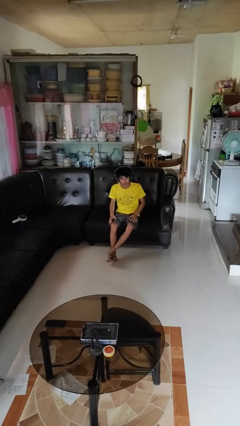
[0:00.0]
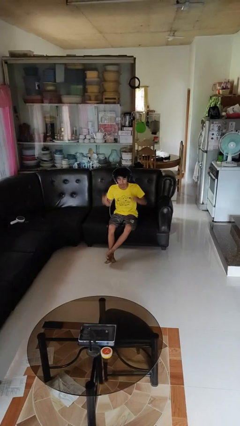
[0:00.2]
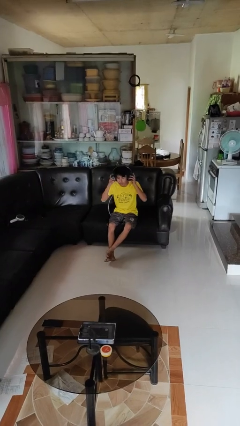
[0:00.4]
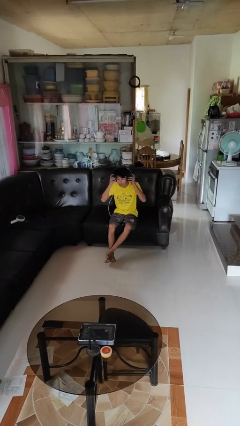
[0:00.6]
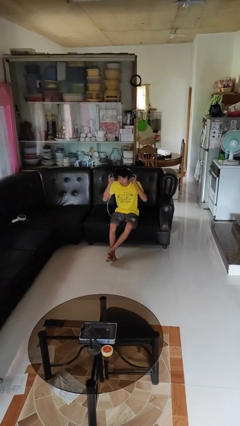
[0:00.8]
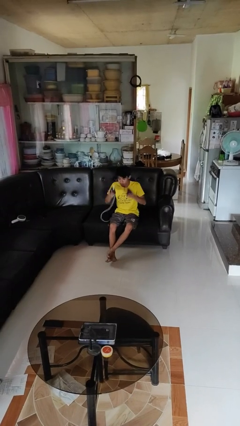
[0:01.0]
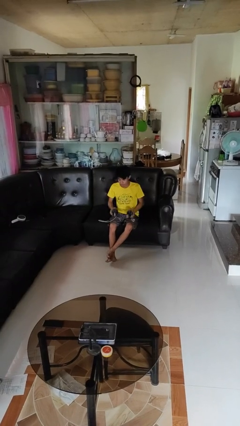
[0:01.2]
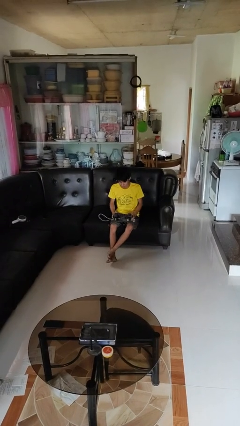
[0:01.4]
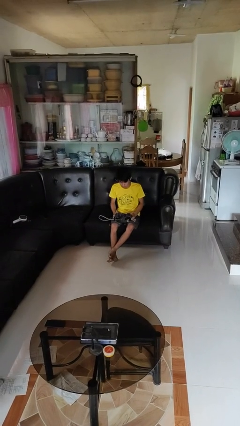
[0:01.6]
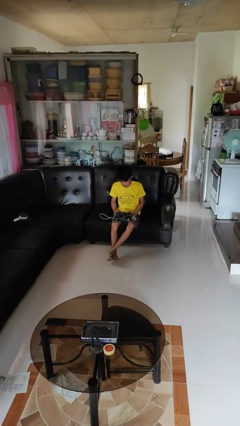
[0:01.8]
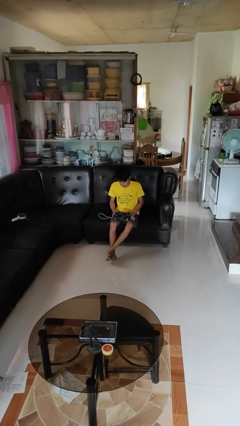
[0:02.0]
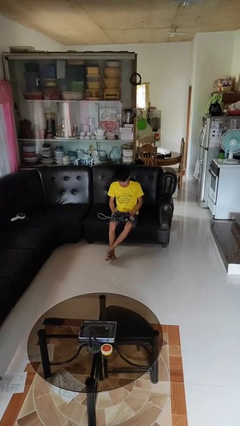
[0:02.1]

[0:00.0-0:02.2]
person takes off headphones

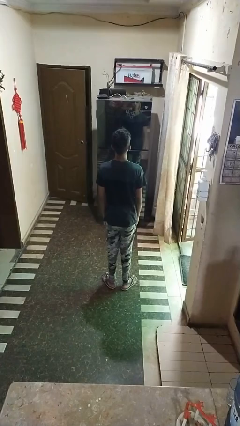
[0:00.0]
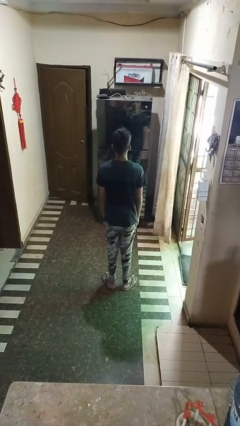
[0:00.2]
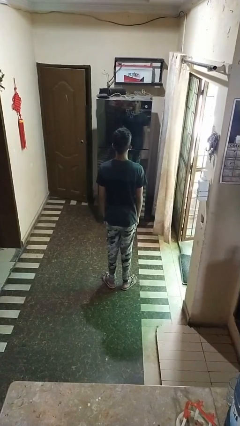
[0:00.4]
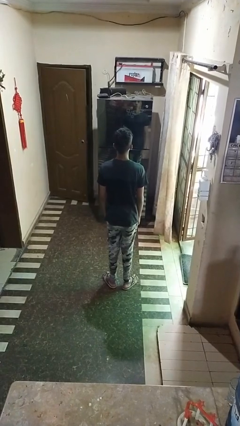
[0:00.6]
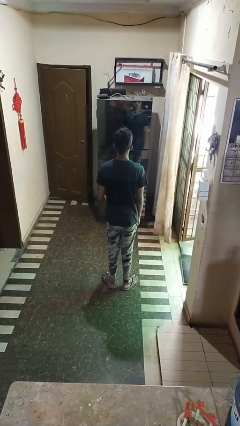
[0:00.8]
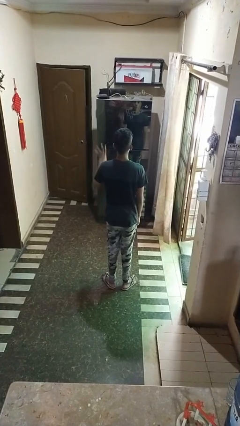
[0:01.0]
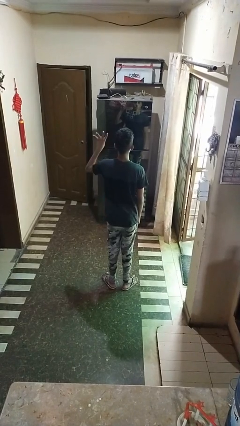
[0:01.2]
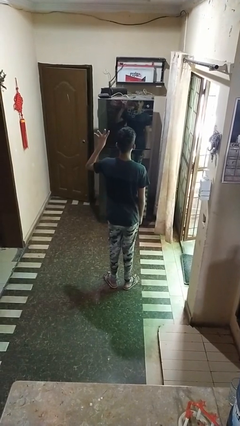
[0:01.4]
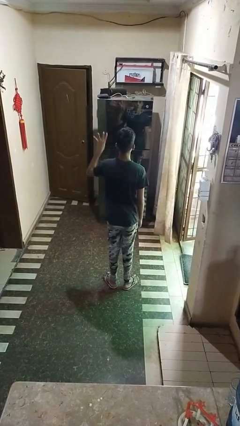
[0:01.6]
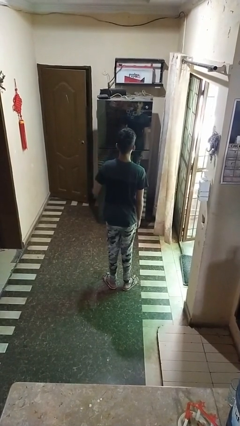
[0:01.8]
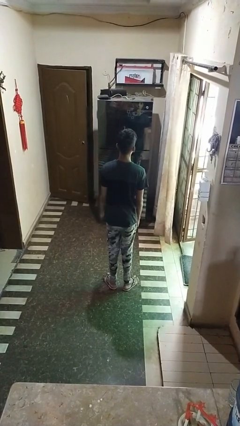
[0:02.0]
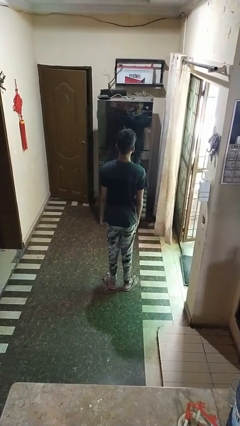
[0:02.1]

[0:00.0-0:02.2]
person gestures number four

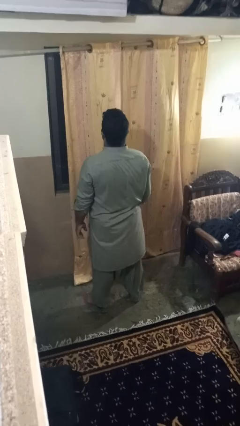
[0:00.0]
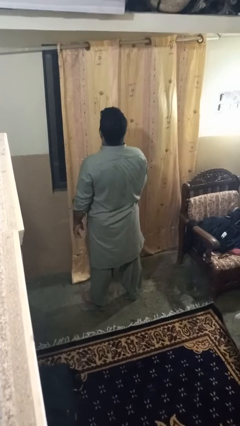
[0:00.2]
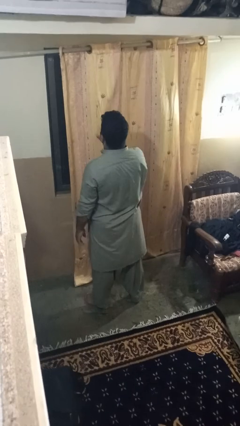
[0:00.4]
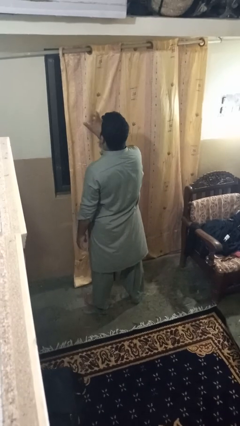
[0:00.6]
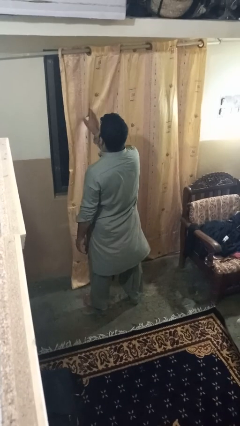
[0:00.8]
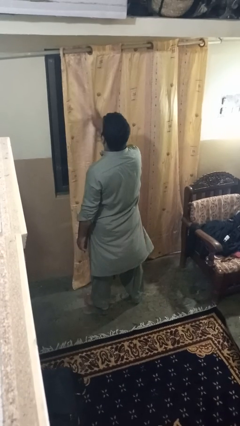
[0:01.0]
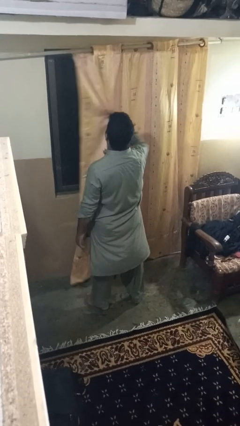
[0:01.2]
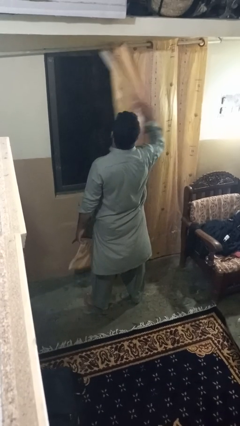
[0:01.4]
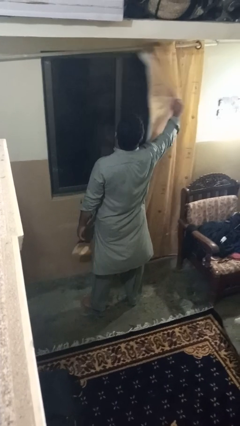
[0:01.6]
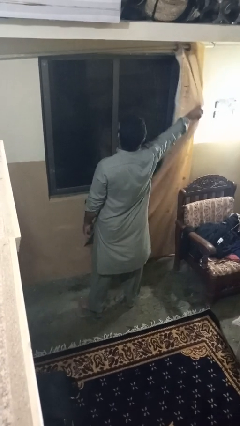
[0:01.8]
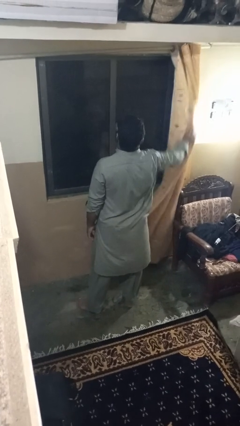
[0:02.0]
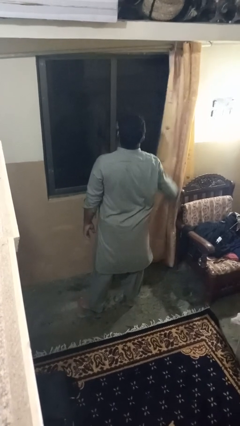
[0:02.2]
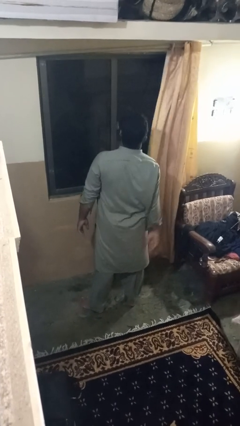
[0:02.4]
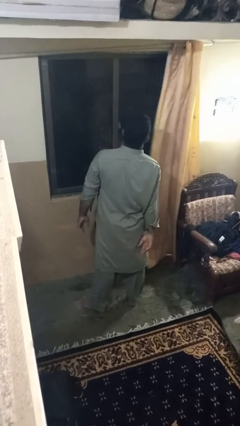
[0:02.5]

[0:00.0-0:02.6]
person opens curtains

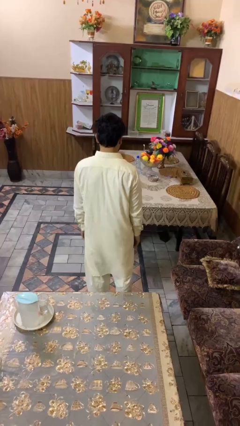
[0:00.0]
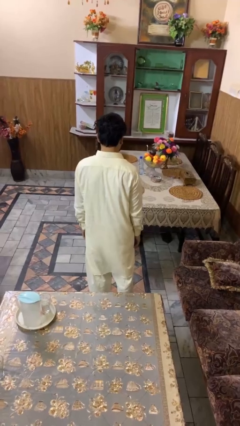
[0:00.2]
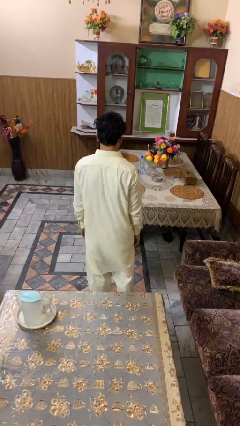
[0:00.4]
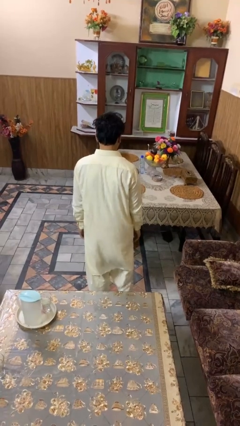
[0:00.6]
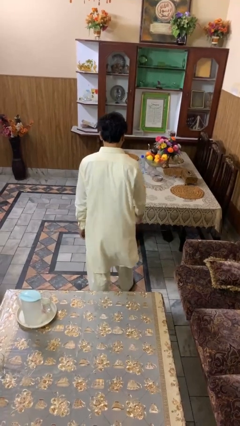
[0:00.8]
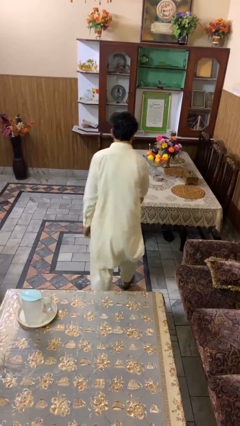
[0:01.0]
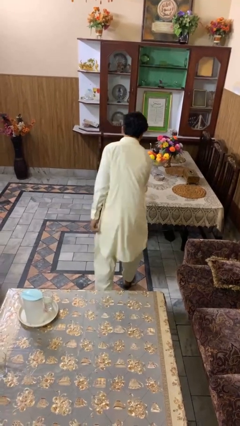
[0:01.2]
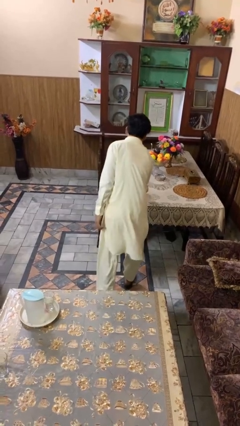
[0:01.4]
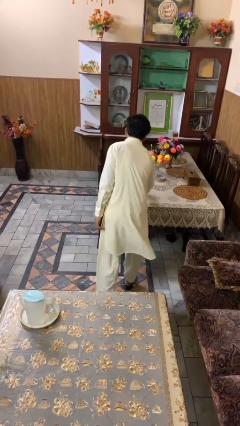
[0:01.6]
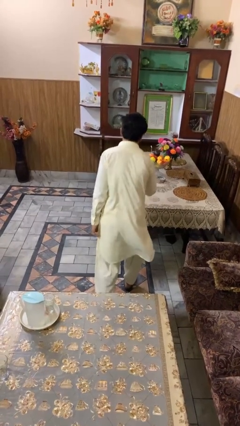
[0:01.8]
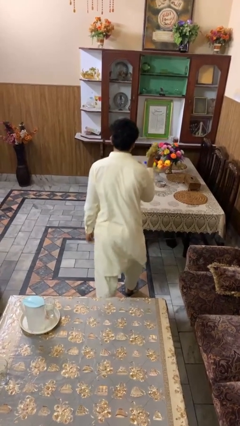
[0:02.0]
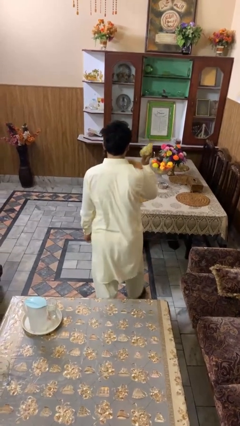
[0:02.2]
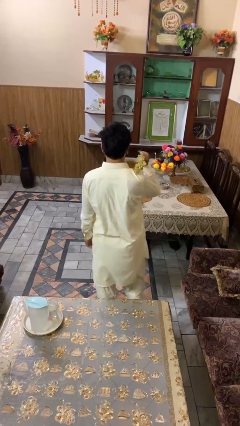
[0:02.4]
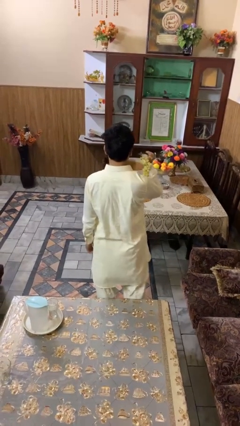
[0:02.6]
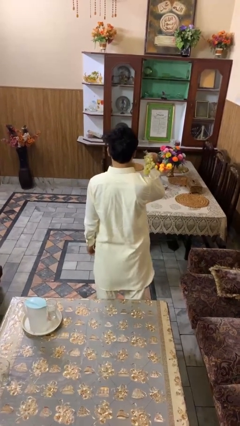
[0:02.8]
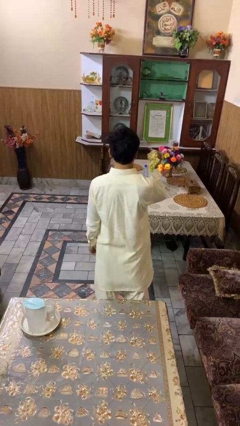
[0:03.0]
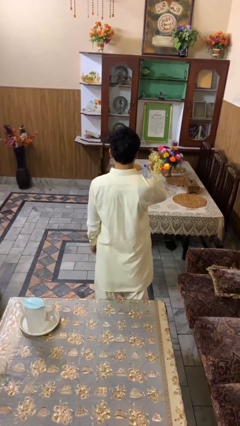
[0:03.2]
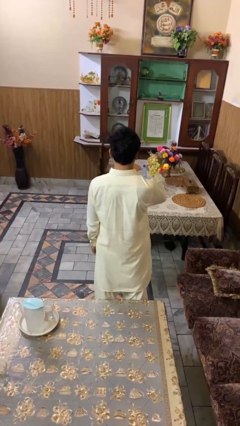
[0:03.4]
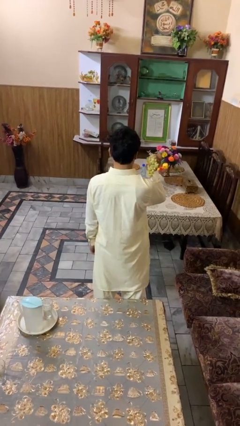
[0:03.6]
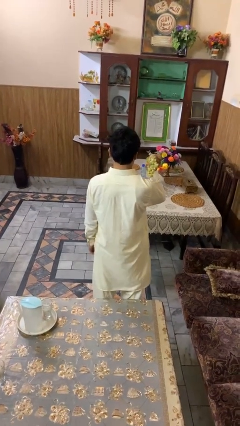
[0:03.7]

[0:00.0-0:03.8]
person picks up object from table

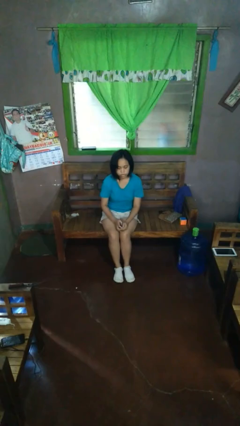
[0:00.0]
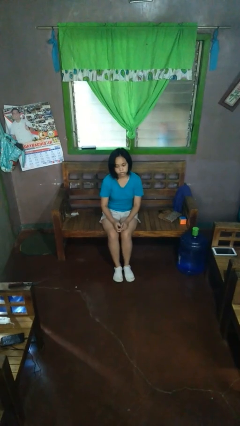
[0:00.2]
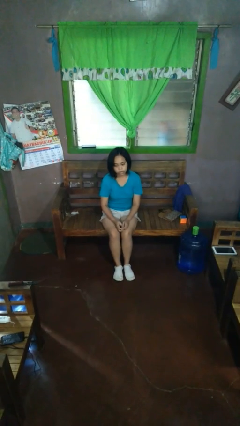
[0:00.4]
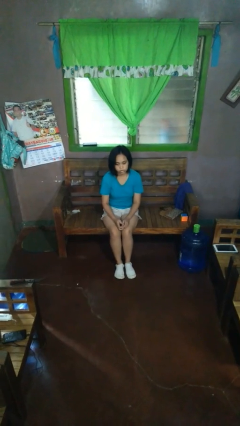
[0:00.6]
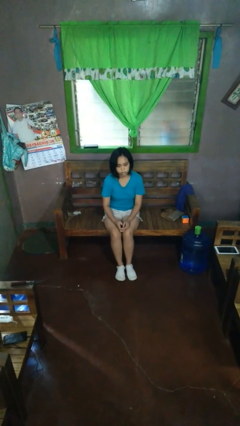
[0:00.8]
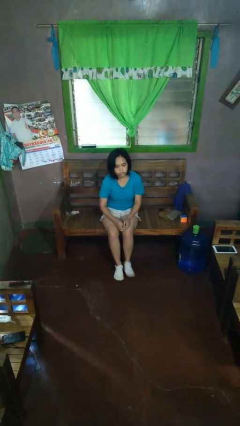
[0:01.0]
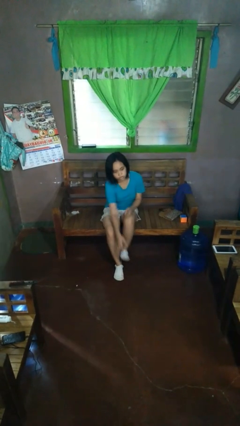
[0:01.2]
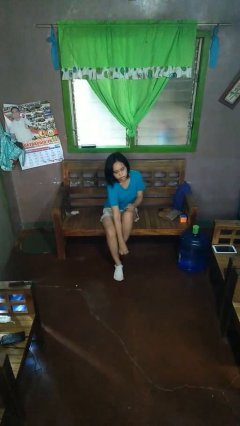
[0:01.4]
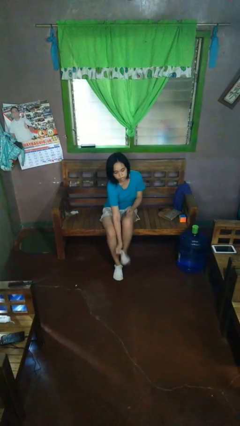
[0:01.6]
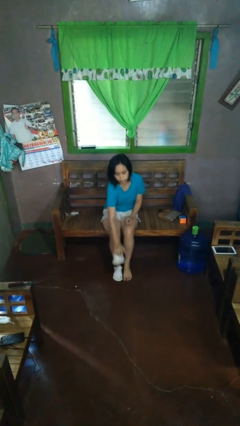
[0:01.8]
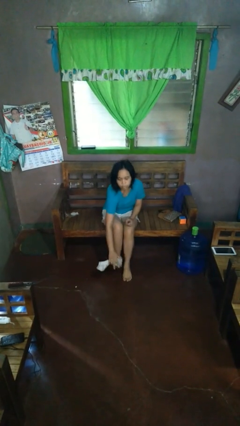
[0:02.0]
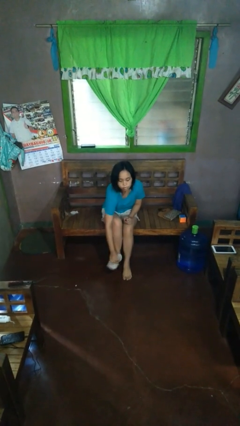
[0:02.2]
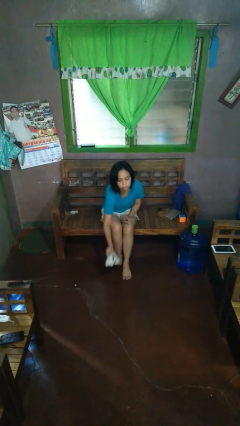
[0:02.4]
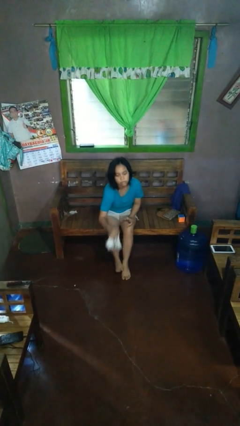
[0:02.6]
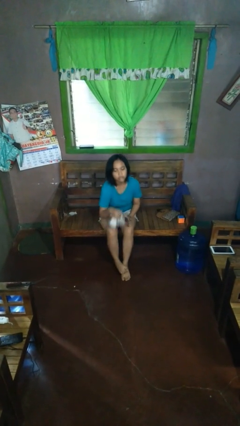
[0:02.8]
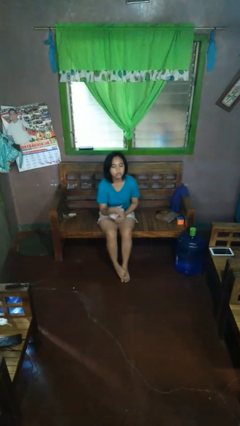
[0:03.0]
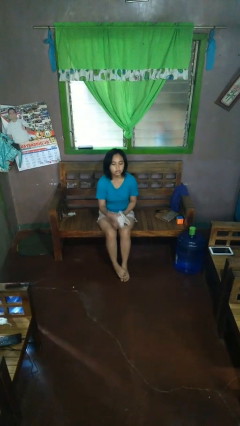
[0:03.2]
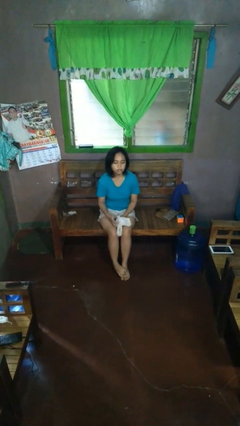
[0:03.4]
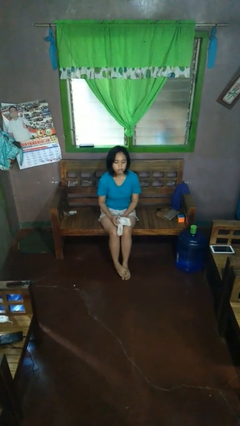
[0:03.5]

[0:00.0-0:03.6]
person takes off socks

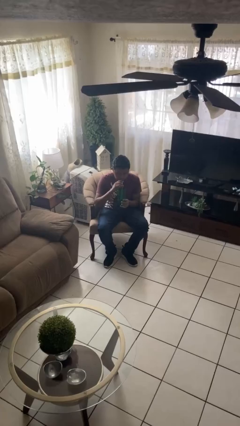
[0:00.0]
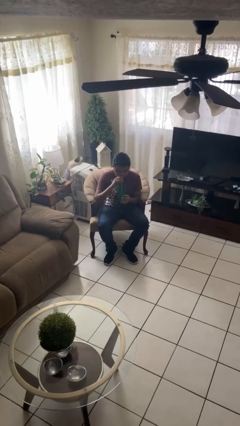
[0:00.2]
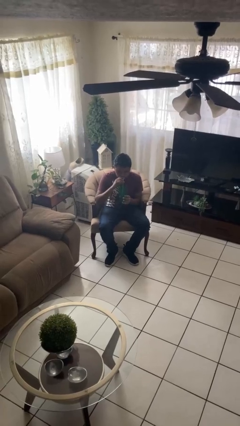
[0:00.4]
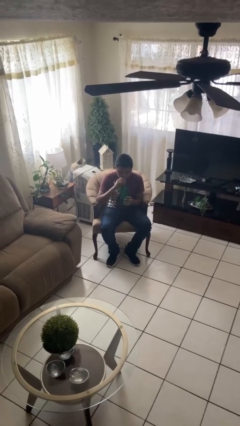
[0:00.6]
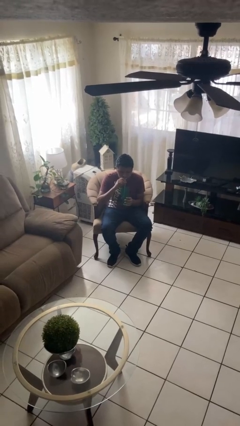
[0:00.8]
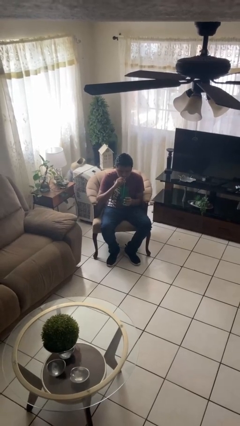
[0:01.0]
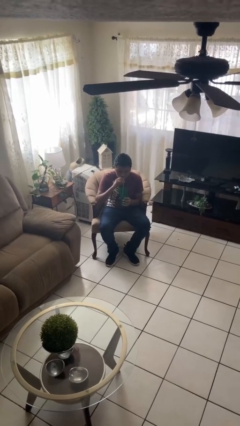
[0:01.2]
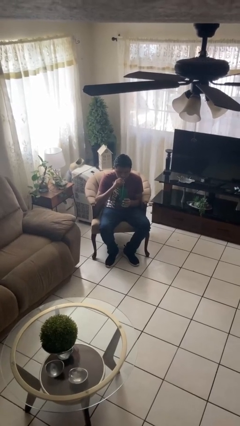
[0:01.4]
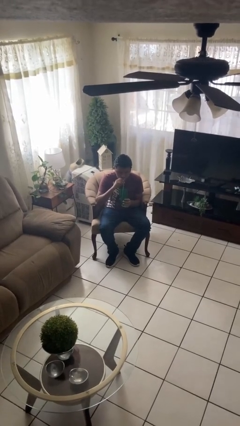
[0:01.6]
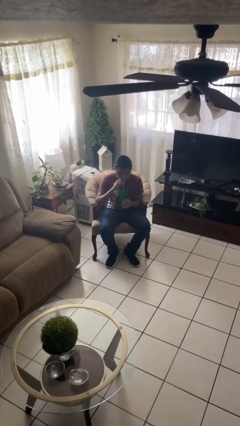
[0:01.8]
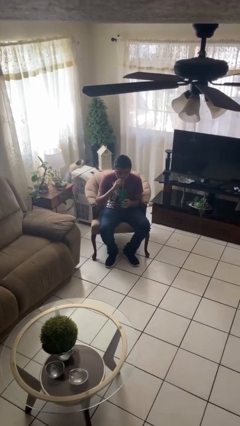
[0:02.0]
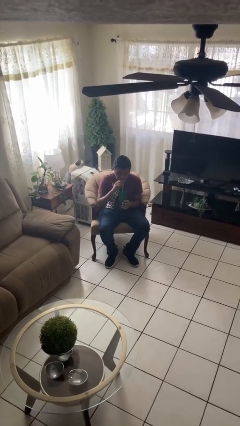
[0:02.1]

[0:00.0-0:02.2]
person drinks from straw

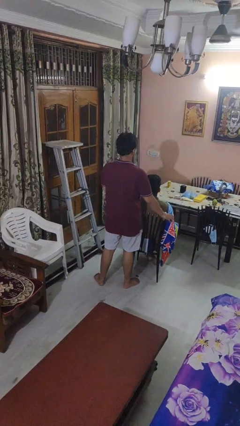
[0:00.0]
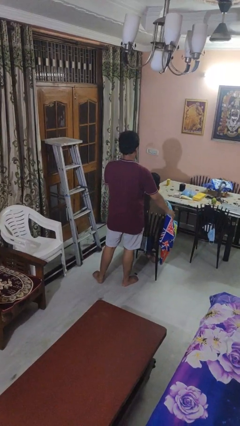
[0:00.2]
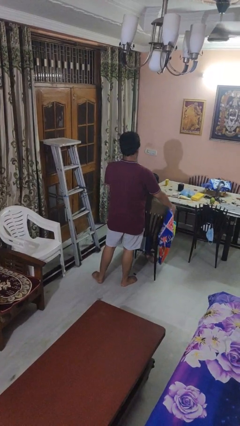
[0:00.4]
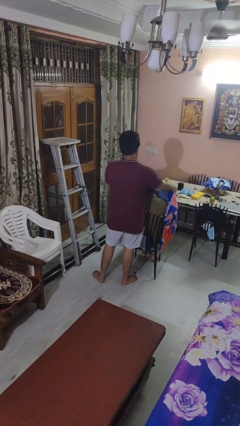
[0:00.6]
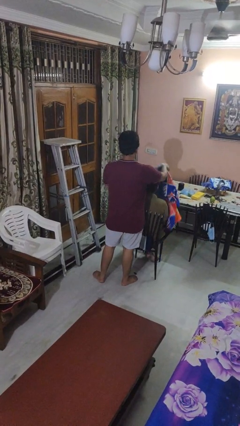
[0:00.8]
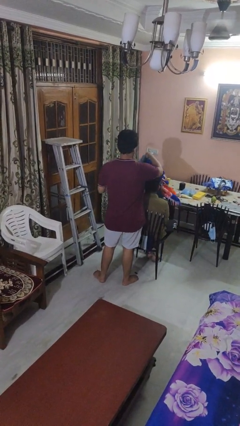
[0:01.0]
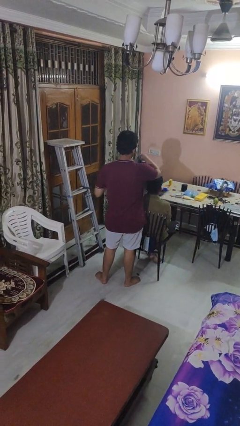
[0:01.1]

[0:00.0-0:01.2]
person uncovers friend with blanket
